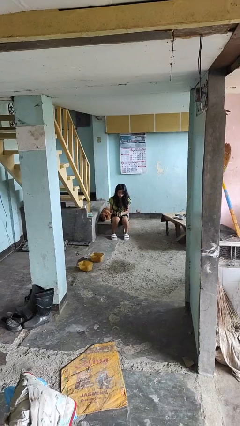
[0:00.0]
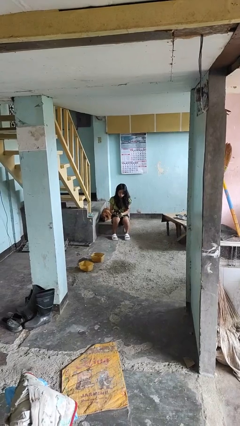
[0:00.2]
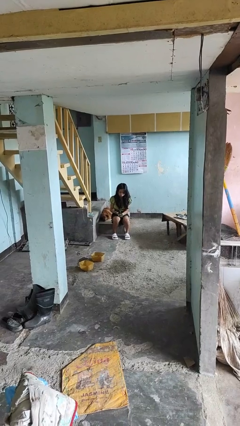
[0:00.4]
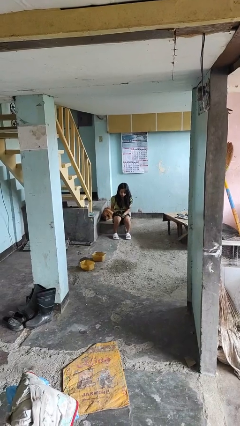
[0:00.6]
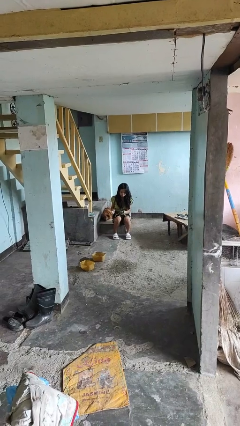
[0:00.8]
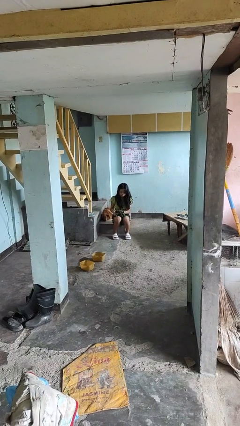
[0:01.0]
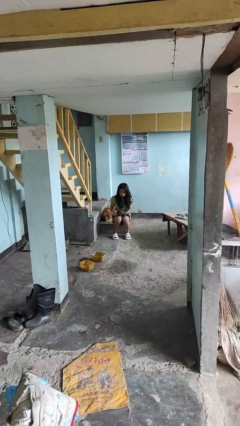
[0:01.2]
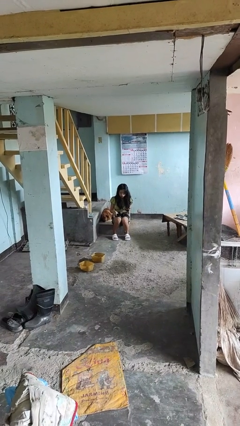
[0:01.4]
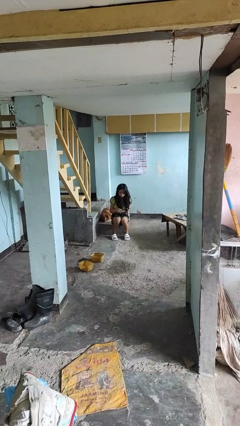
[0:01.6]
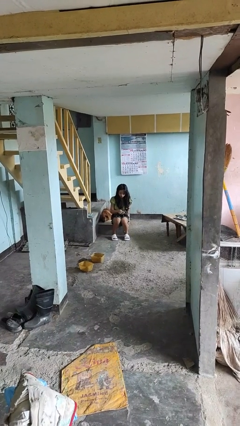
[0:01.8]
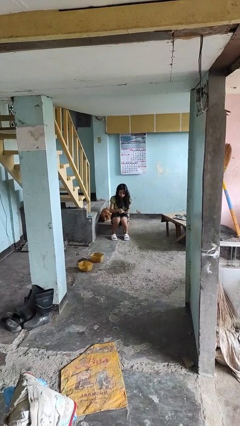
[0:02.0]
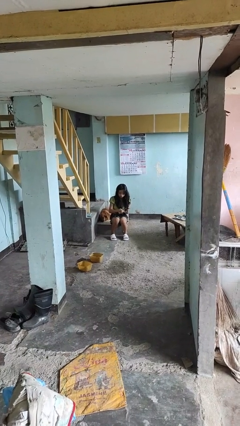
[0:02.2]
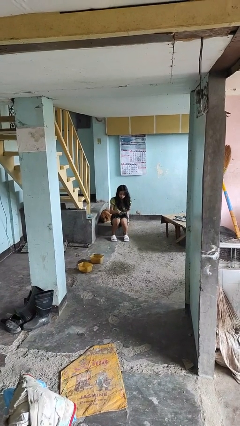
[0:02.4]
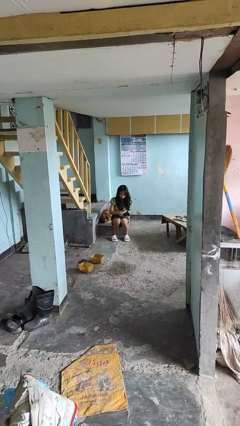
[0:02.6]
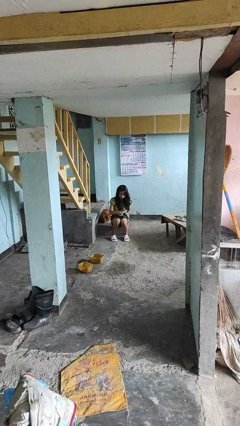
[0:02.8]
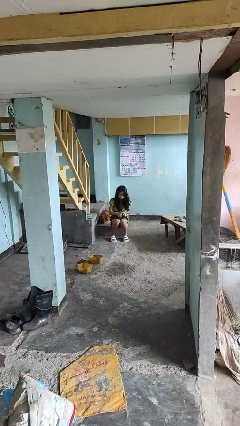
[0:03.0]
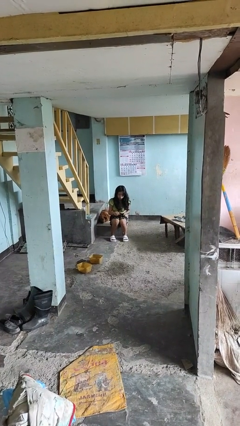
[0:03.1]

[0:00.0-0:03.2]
person takes off gloves

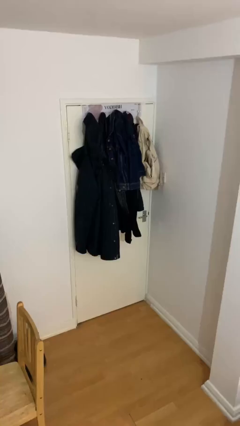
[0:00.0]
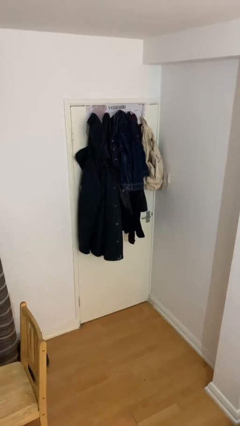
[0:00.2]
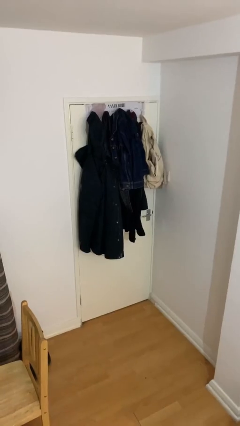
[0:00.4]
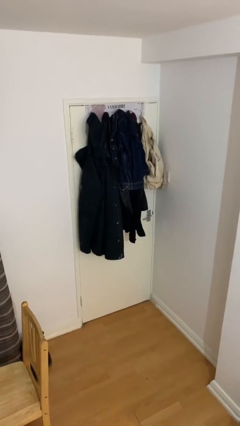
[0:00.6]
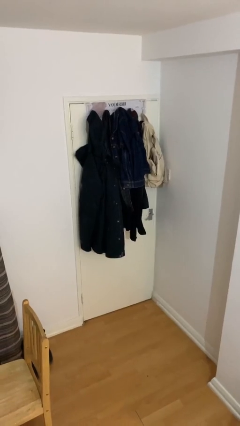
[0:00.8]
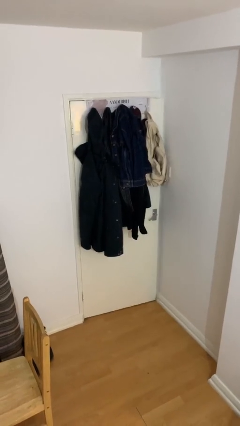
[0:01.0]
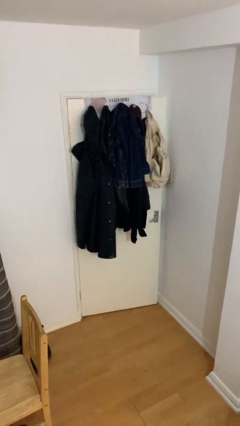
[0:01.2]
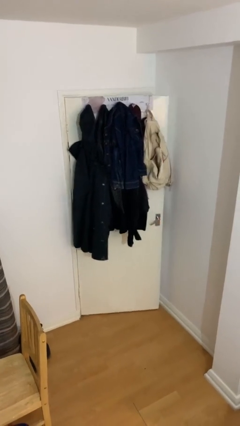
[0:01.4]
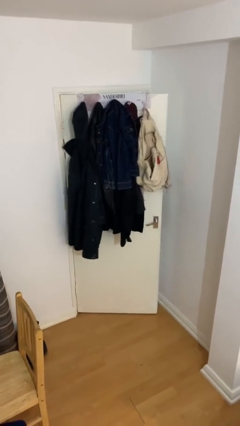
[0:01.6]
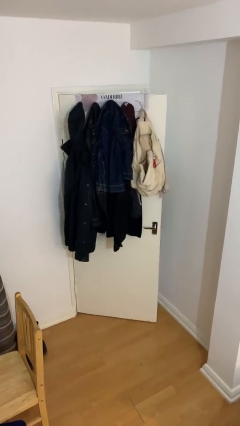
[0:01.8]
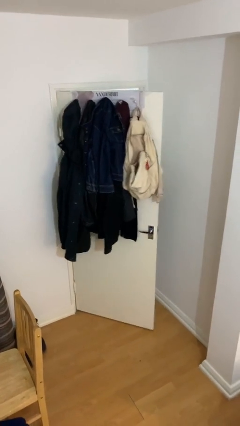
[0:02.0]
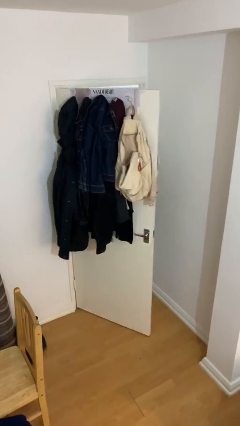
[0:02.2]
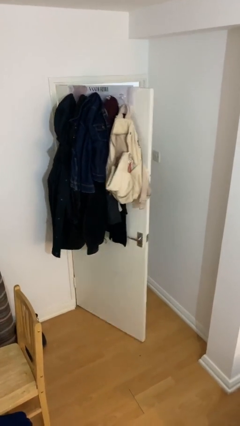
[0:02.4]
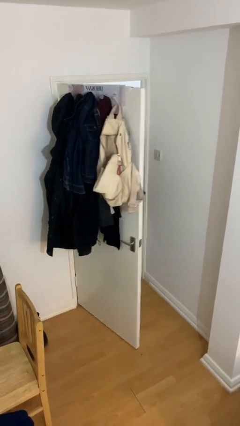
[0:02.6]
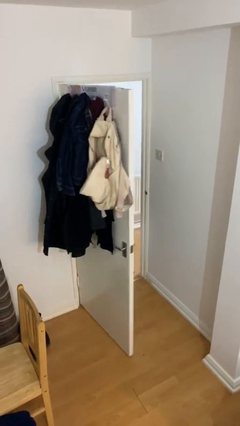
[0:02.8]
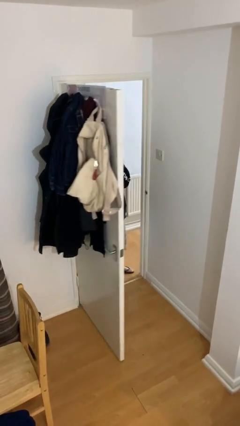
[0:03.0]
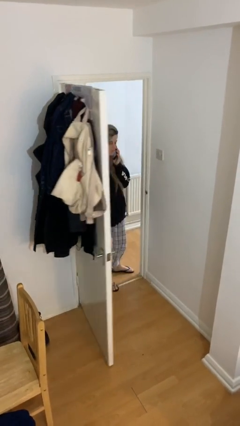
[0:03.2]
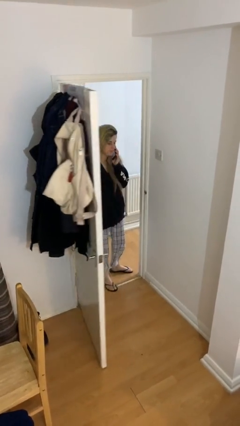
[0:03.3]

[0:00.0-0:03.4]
person opens facility door

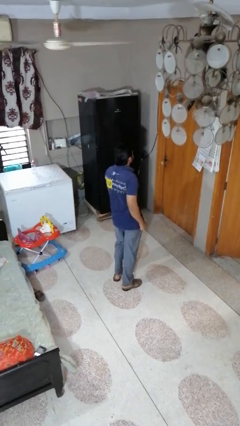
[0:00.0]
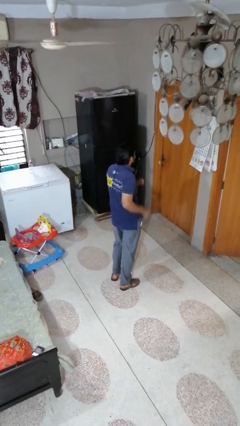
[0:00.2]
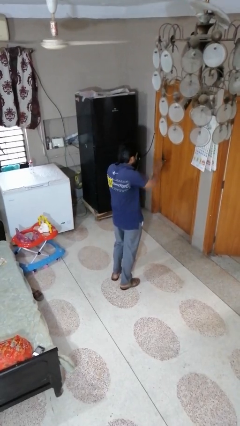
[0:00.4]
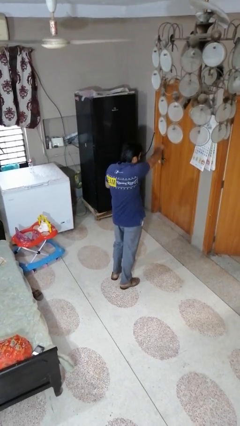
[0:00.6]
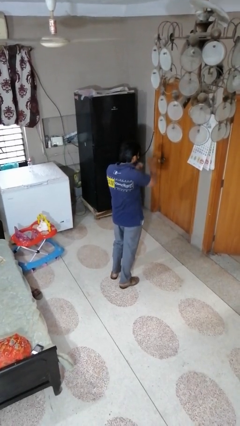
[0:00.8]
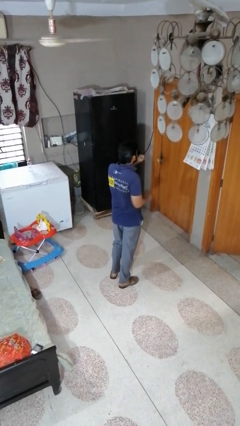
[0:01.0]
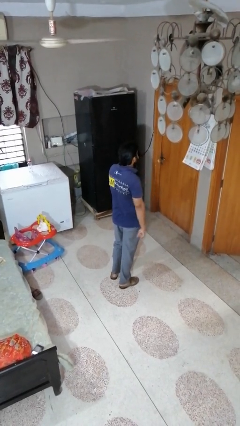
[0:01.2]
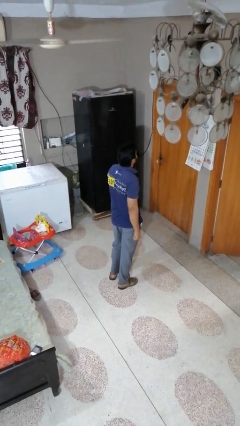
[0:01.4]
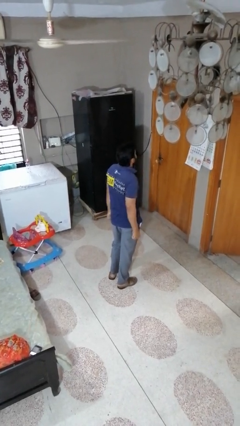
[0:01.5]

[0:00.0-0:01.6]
person karate chop

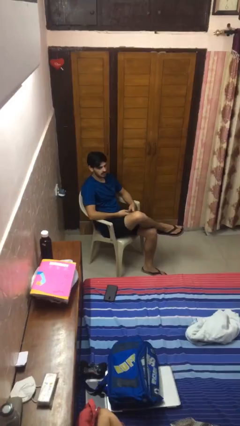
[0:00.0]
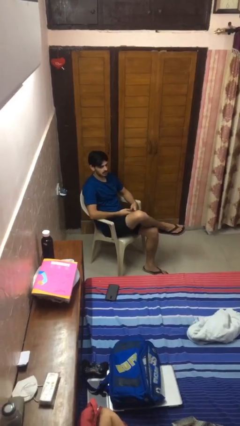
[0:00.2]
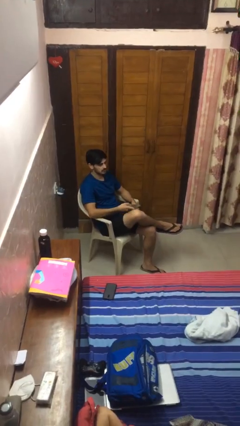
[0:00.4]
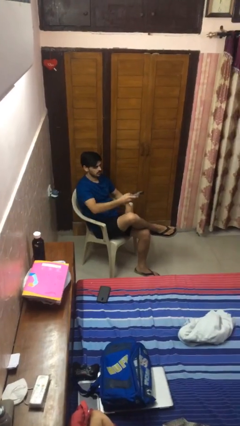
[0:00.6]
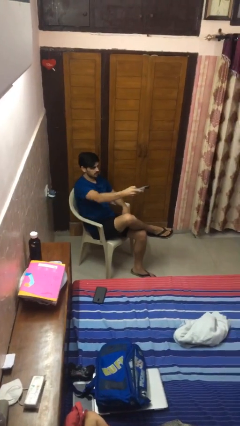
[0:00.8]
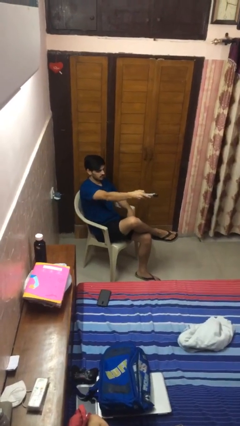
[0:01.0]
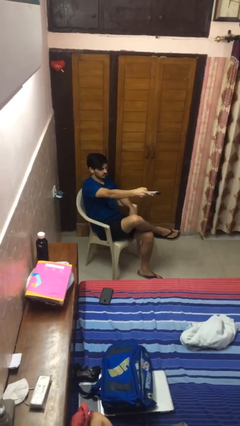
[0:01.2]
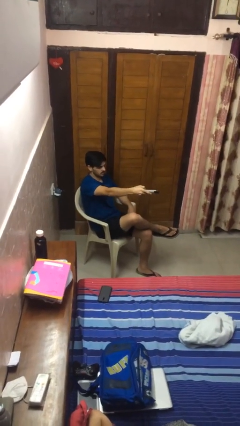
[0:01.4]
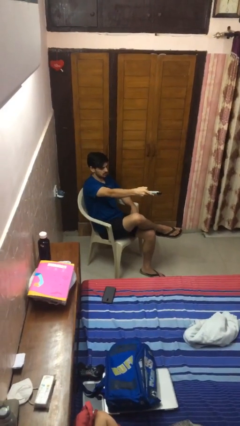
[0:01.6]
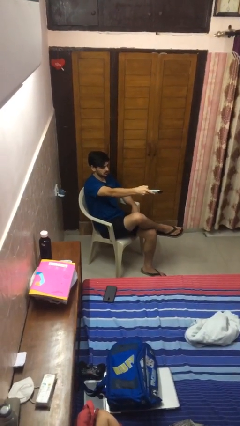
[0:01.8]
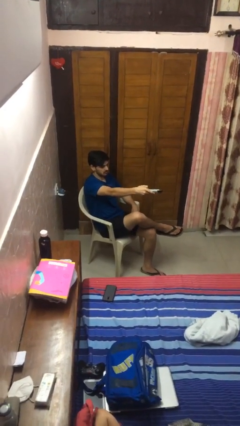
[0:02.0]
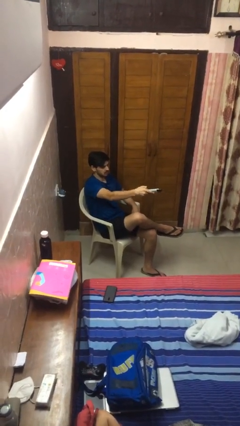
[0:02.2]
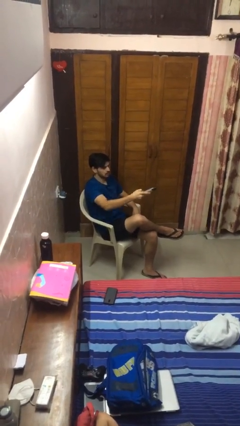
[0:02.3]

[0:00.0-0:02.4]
person uses television remote

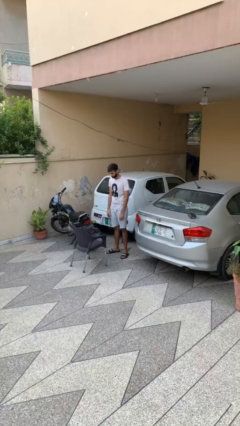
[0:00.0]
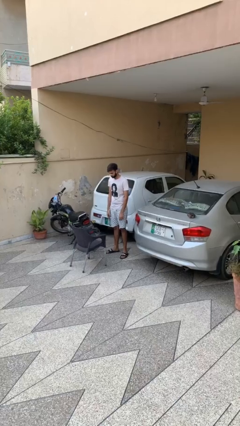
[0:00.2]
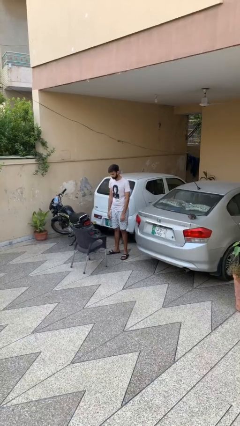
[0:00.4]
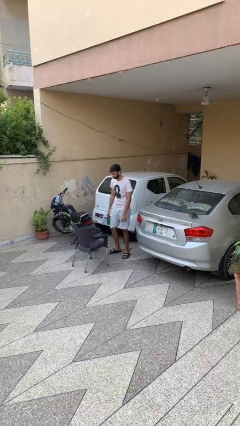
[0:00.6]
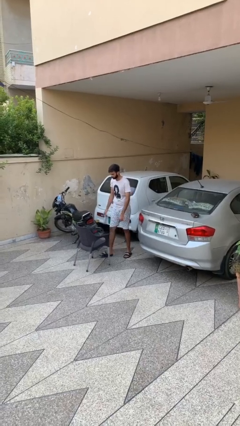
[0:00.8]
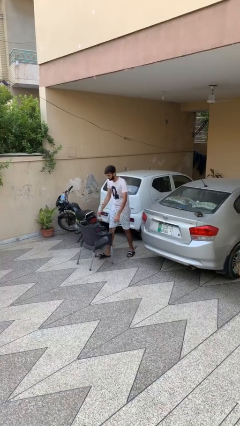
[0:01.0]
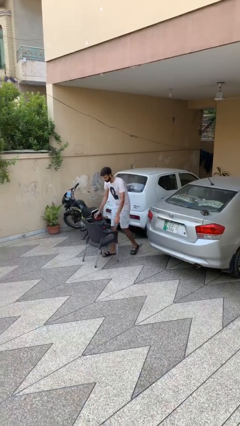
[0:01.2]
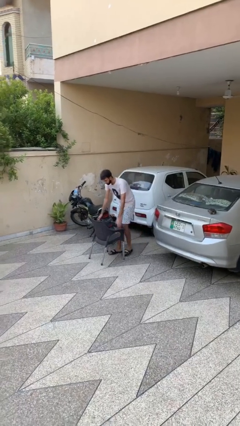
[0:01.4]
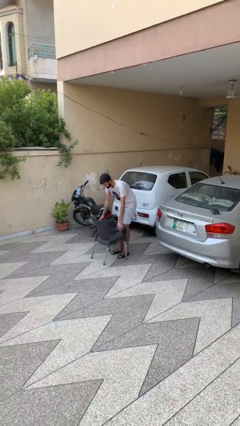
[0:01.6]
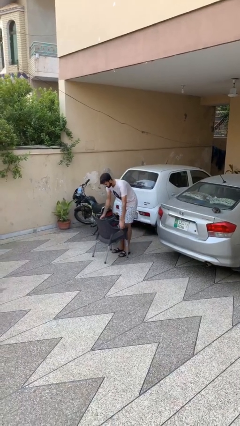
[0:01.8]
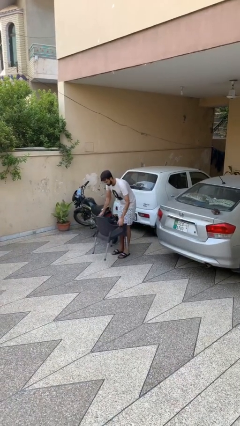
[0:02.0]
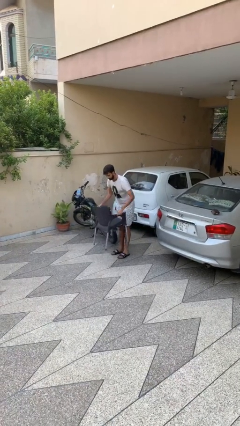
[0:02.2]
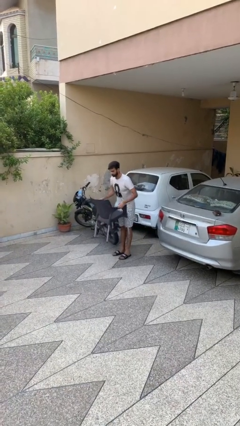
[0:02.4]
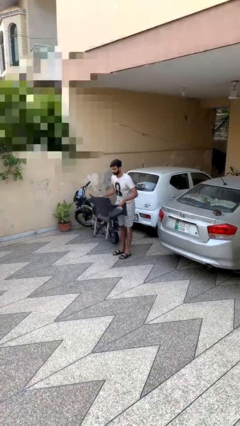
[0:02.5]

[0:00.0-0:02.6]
person picks up object from floor

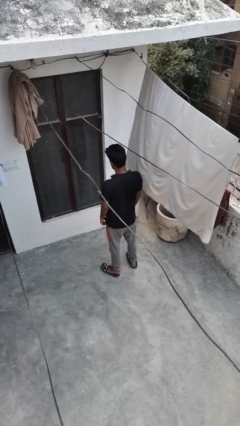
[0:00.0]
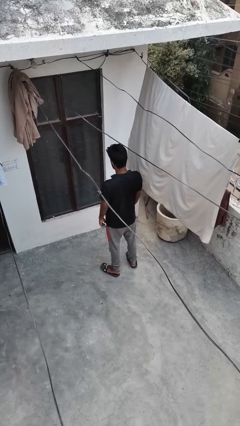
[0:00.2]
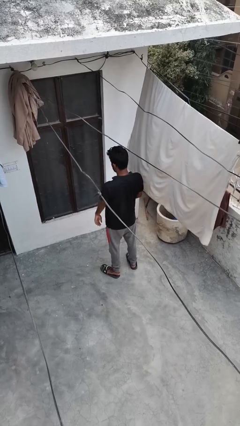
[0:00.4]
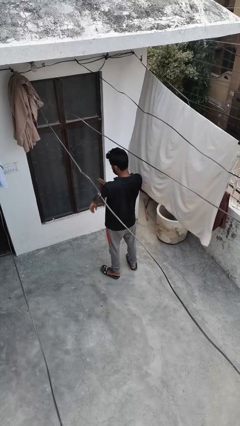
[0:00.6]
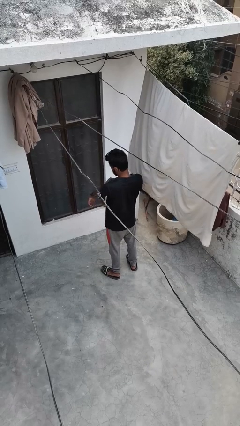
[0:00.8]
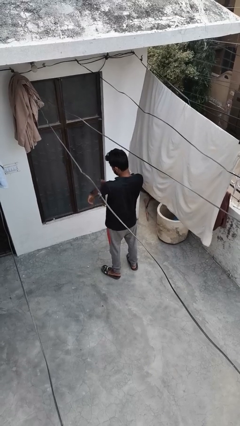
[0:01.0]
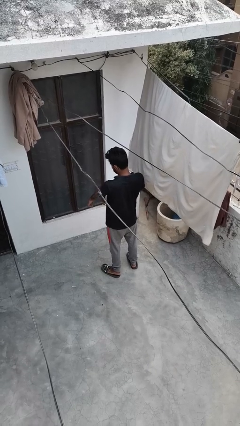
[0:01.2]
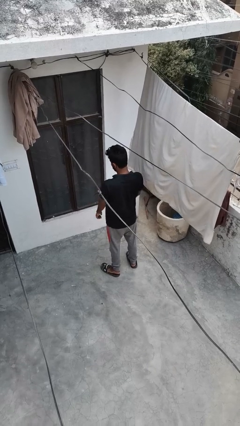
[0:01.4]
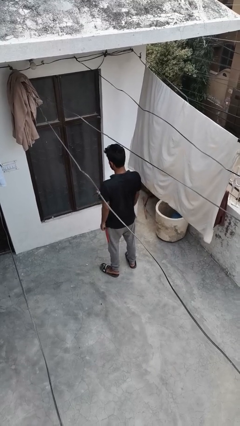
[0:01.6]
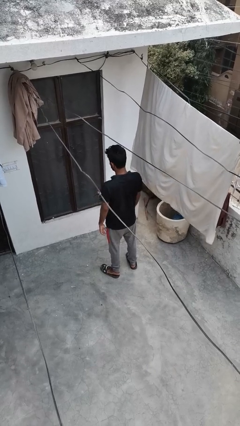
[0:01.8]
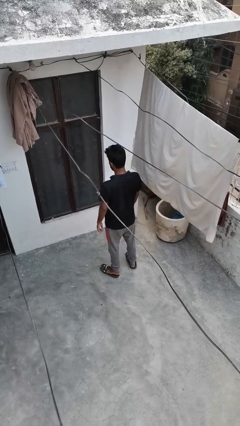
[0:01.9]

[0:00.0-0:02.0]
person swats bug

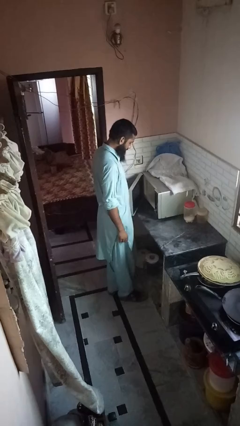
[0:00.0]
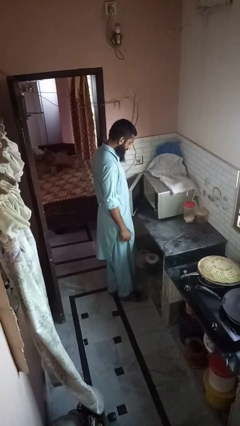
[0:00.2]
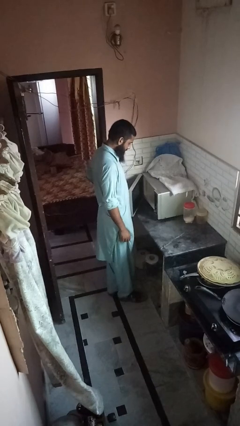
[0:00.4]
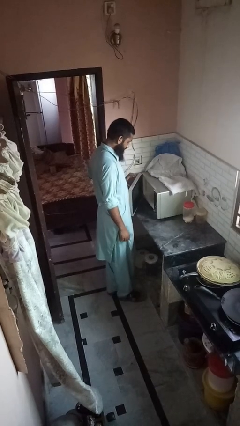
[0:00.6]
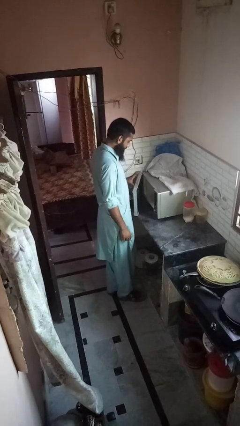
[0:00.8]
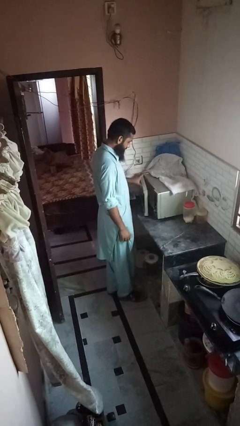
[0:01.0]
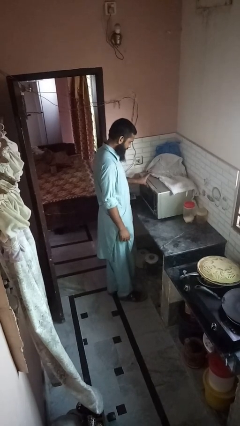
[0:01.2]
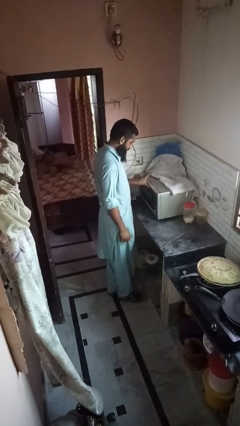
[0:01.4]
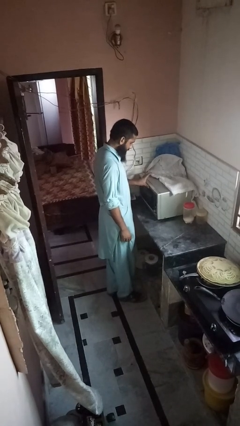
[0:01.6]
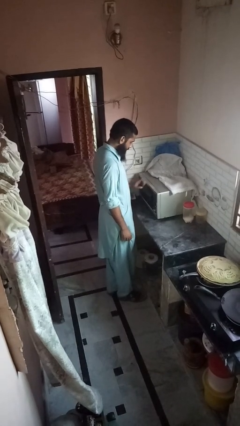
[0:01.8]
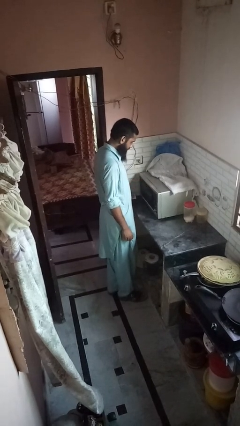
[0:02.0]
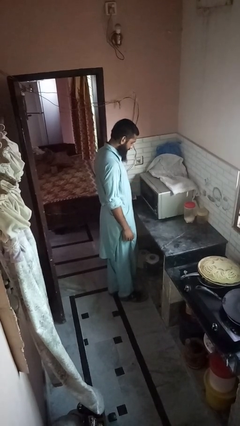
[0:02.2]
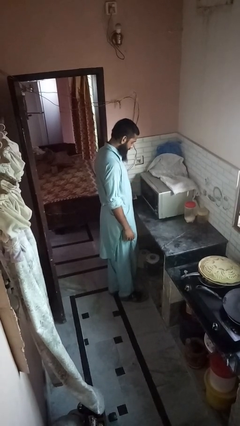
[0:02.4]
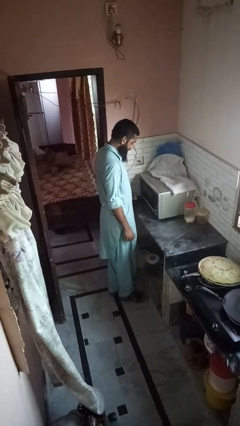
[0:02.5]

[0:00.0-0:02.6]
person closes microwave
